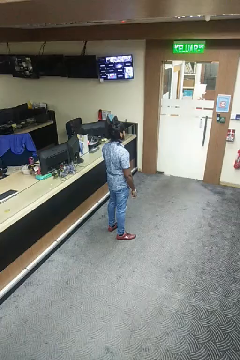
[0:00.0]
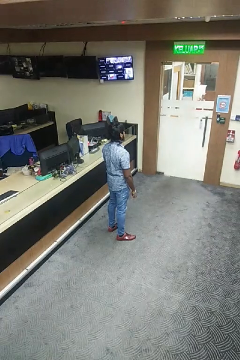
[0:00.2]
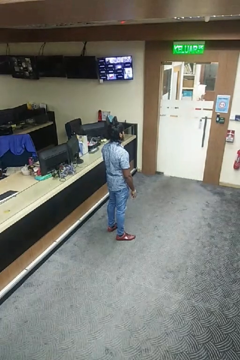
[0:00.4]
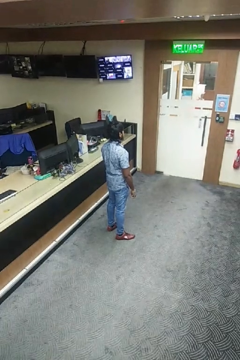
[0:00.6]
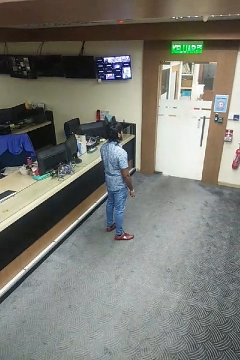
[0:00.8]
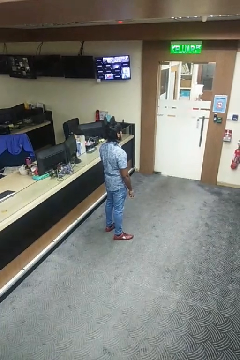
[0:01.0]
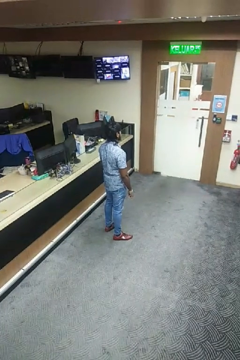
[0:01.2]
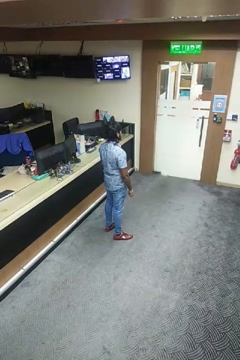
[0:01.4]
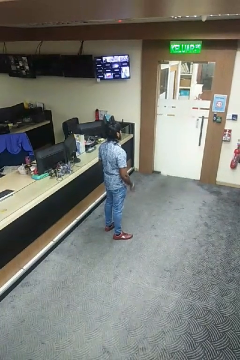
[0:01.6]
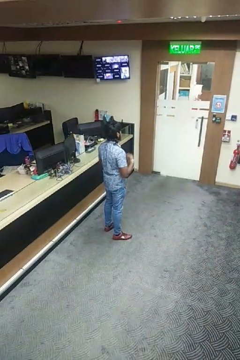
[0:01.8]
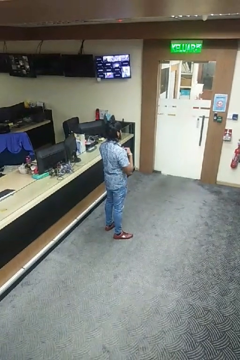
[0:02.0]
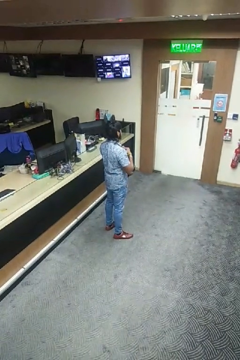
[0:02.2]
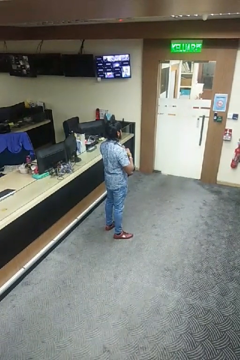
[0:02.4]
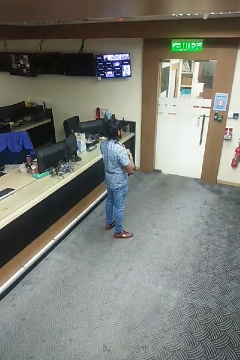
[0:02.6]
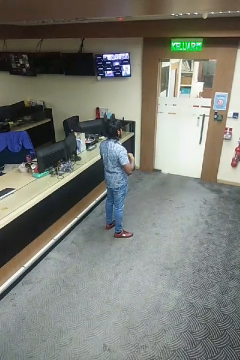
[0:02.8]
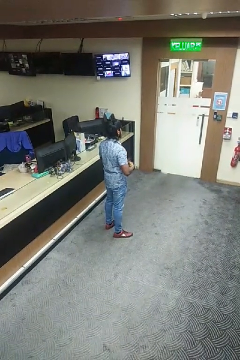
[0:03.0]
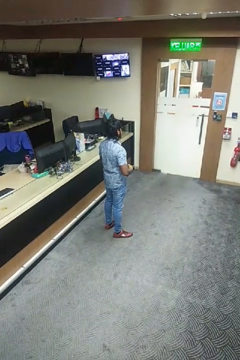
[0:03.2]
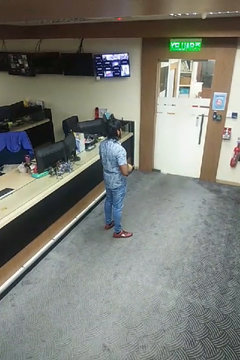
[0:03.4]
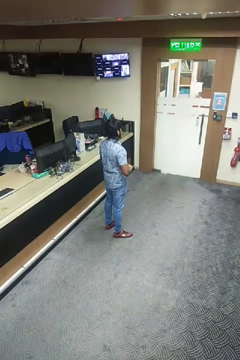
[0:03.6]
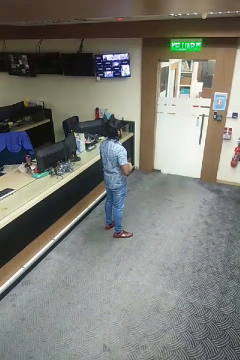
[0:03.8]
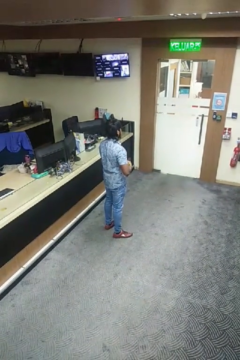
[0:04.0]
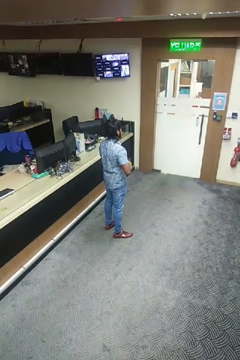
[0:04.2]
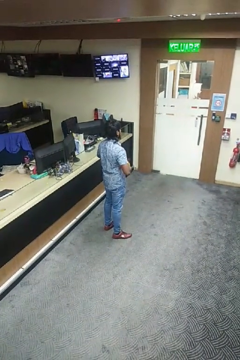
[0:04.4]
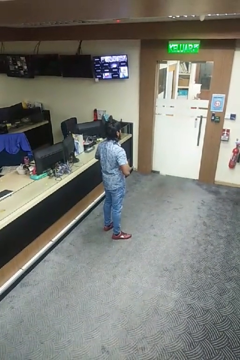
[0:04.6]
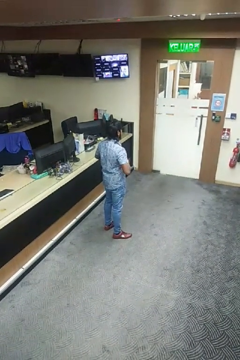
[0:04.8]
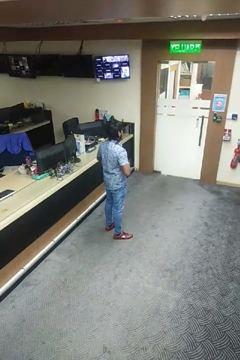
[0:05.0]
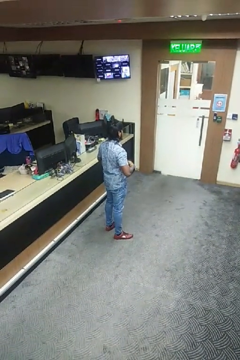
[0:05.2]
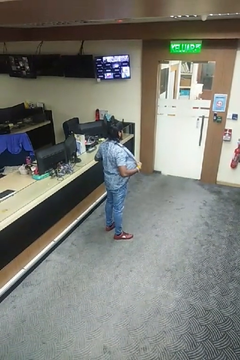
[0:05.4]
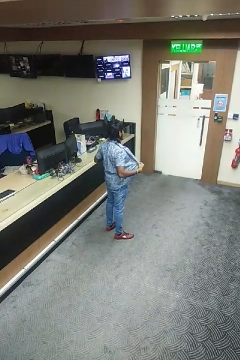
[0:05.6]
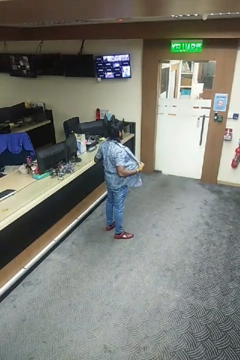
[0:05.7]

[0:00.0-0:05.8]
person unbuttons shirt

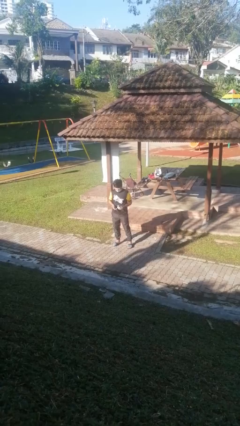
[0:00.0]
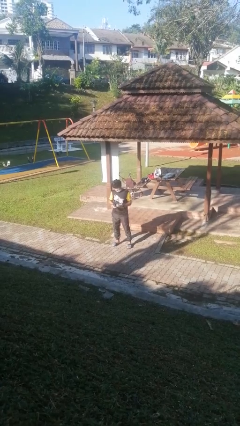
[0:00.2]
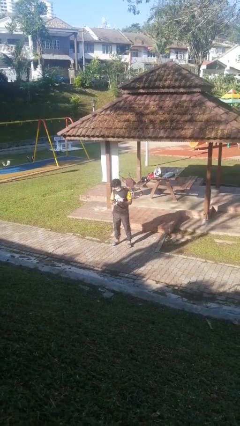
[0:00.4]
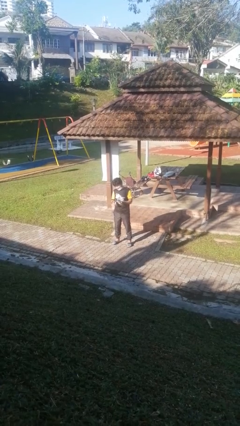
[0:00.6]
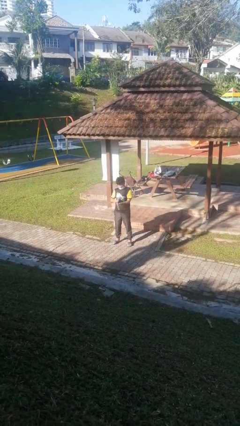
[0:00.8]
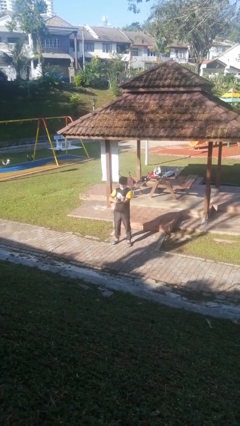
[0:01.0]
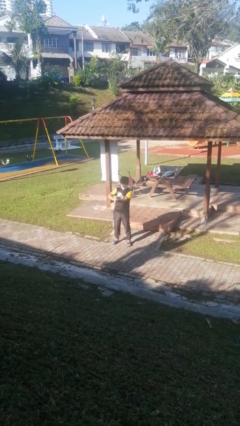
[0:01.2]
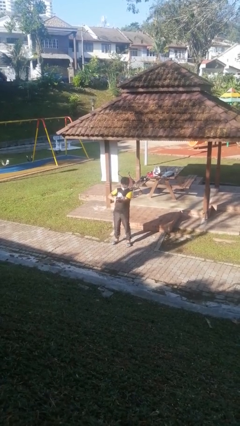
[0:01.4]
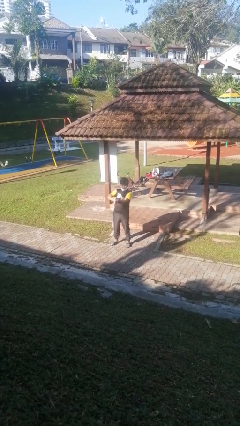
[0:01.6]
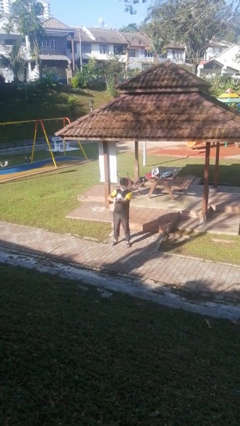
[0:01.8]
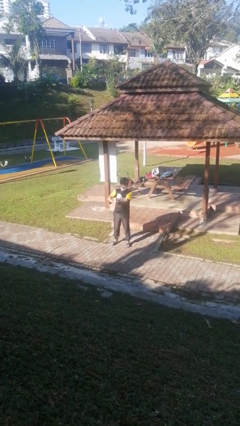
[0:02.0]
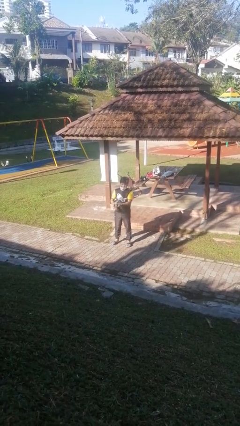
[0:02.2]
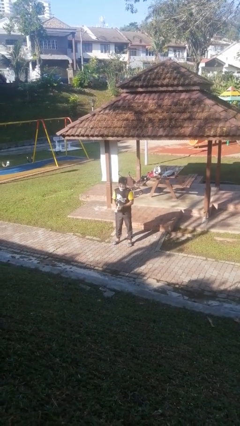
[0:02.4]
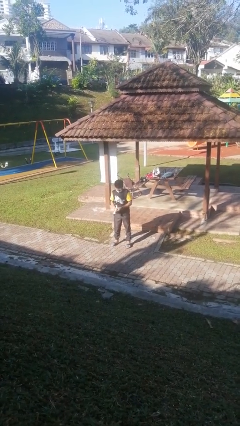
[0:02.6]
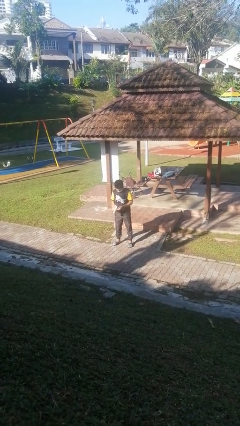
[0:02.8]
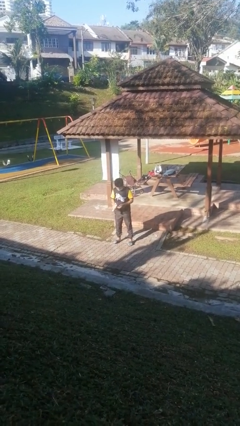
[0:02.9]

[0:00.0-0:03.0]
person applies sunscreen

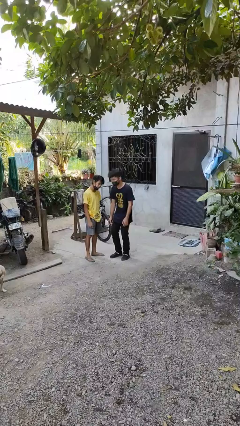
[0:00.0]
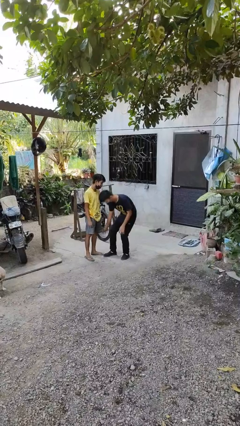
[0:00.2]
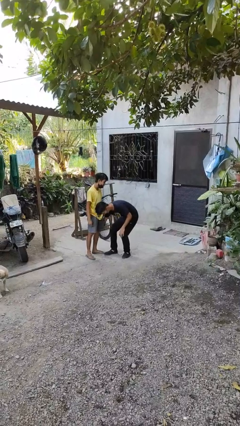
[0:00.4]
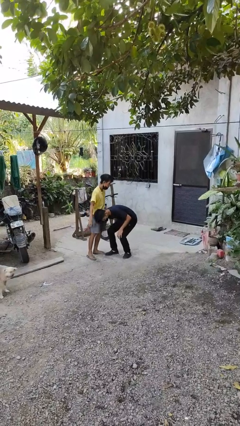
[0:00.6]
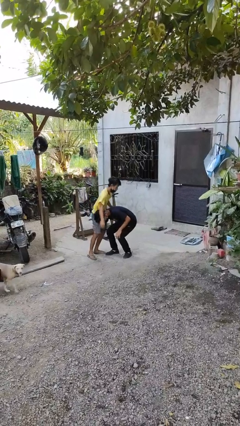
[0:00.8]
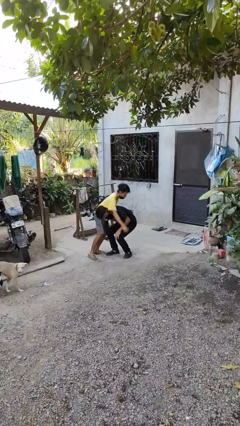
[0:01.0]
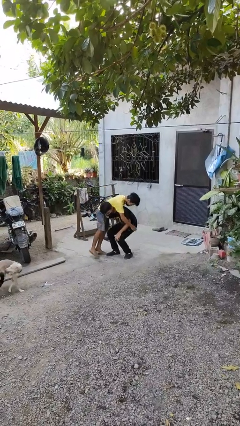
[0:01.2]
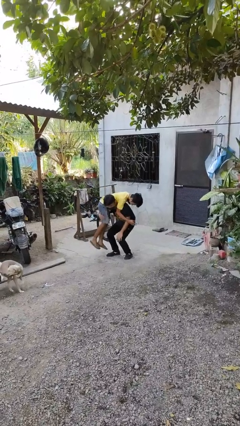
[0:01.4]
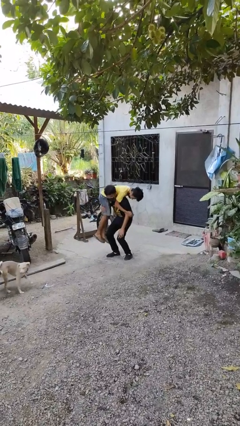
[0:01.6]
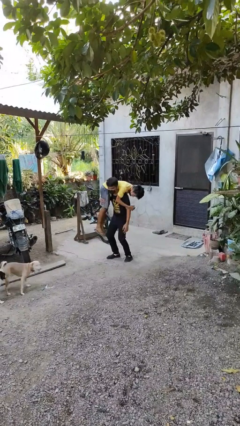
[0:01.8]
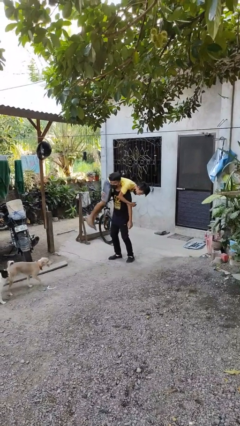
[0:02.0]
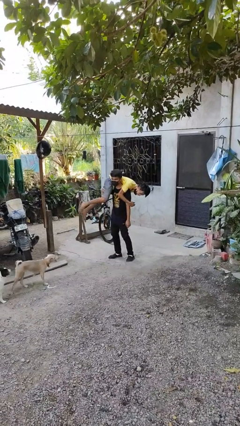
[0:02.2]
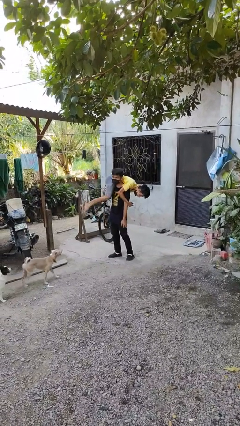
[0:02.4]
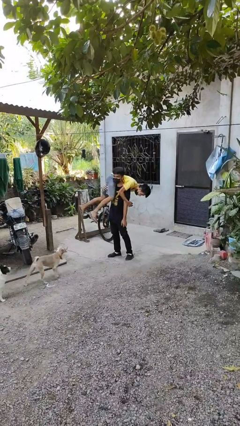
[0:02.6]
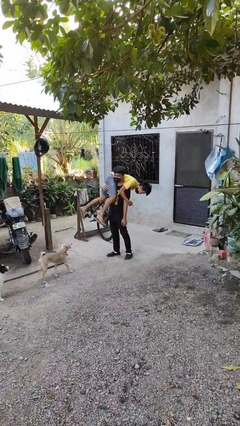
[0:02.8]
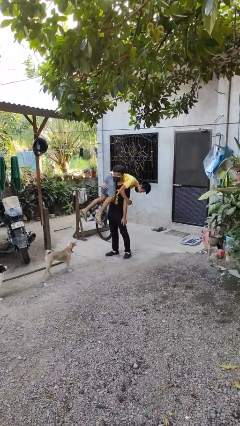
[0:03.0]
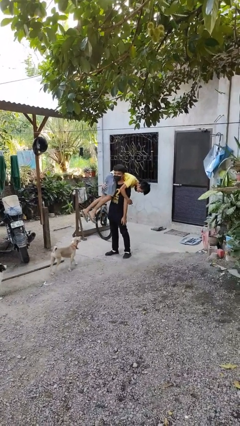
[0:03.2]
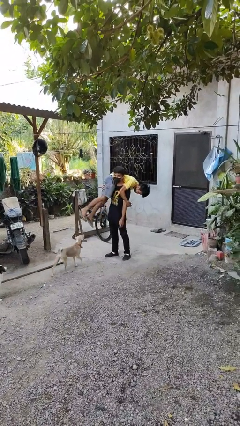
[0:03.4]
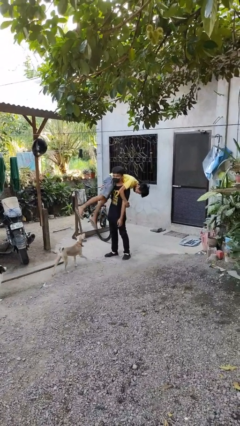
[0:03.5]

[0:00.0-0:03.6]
person carries person over shoulder

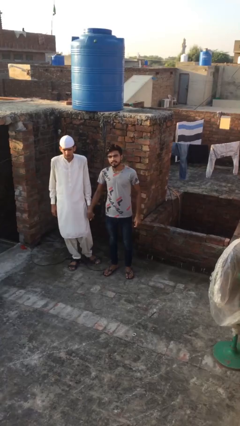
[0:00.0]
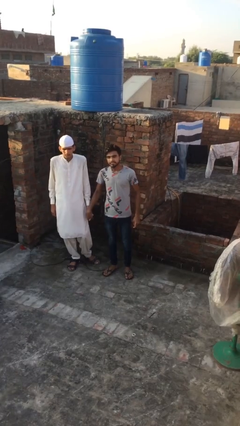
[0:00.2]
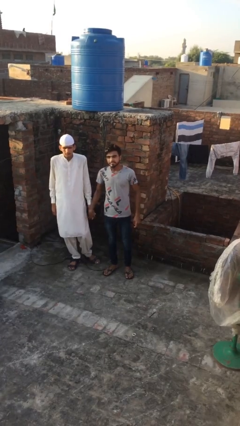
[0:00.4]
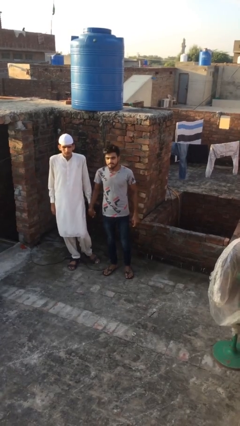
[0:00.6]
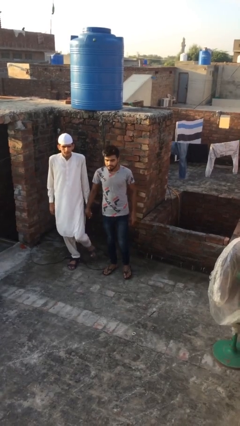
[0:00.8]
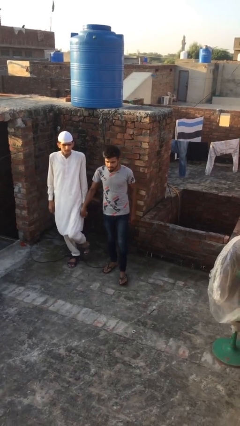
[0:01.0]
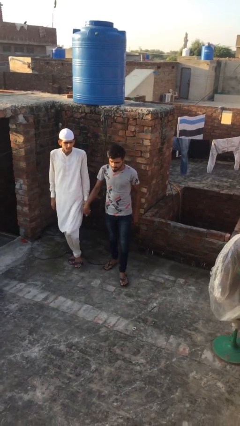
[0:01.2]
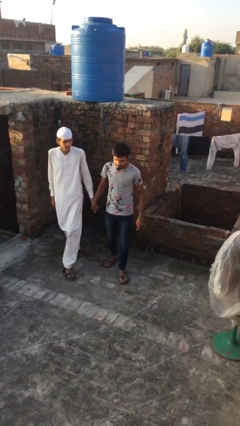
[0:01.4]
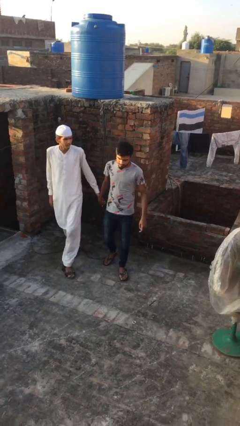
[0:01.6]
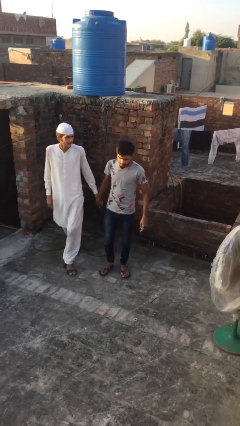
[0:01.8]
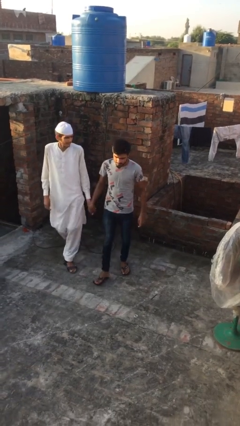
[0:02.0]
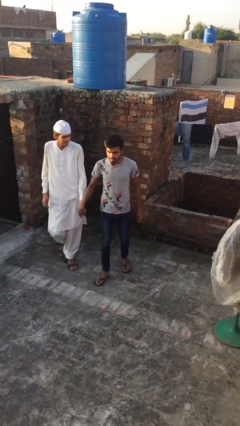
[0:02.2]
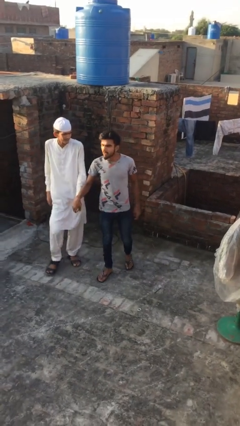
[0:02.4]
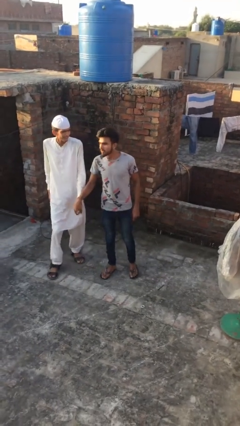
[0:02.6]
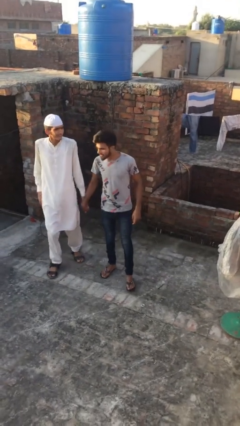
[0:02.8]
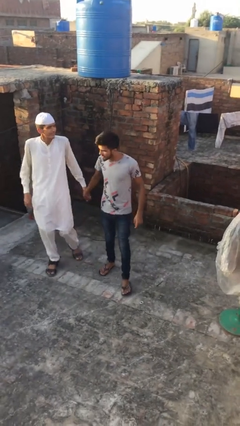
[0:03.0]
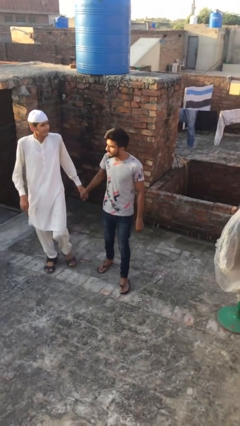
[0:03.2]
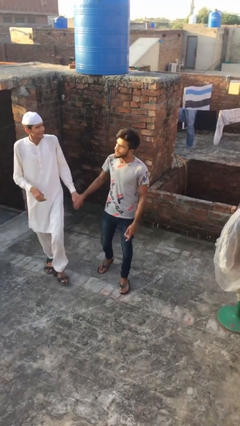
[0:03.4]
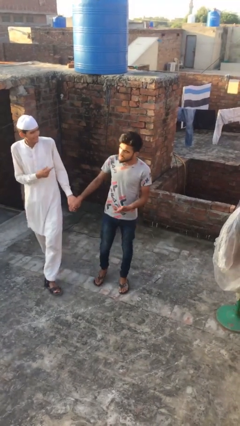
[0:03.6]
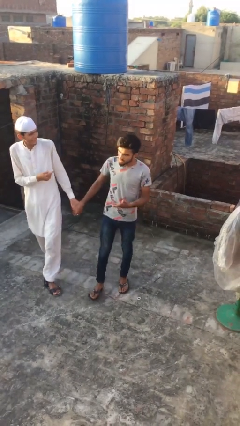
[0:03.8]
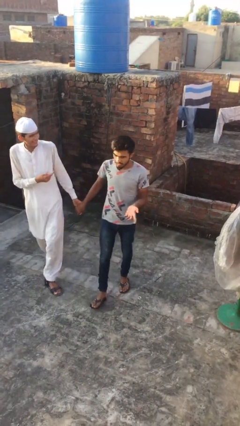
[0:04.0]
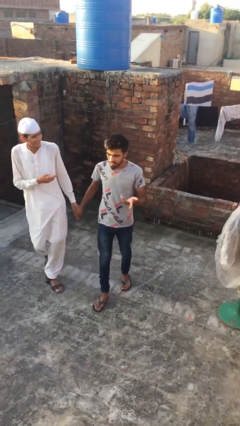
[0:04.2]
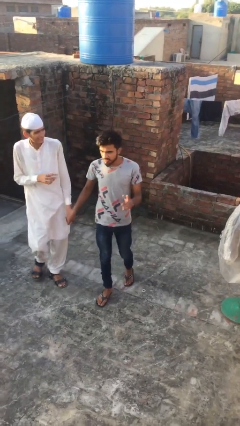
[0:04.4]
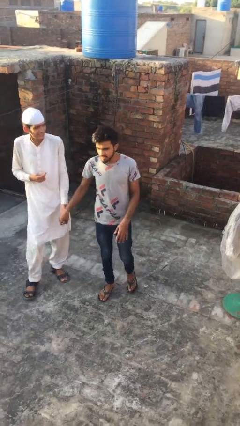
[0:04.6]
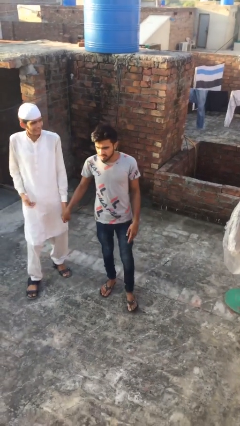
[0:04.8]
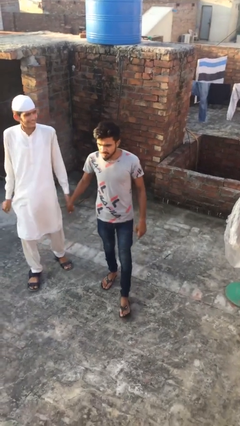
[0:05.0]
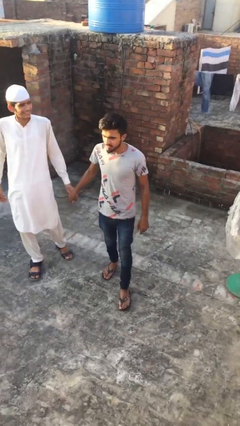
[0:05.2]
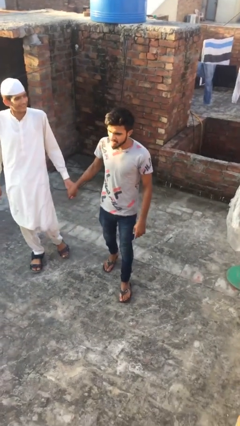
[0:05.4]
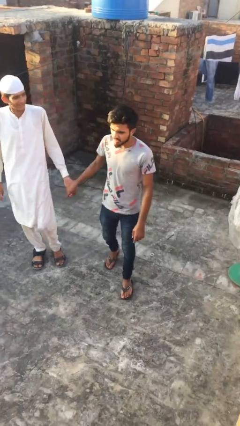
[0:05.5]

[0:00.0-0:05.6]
person holds hand

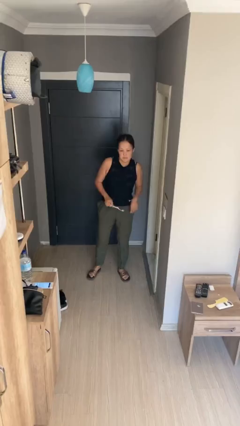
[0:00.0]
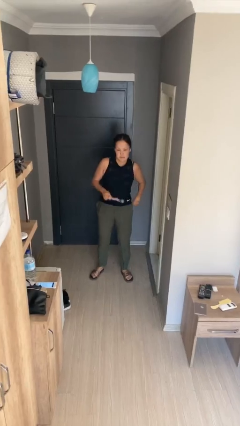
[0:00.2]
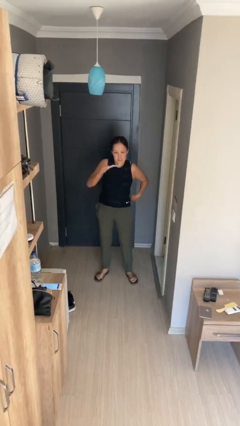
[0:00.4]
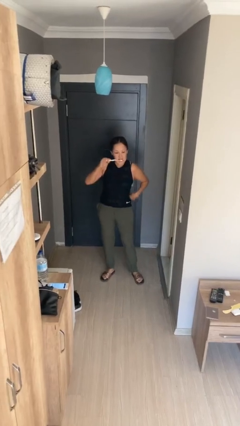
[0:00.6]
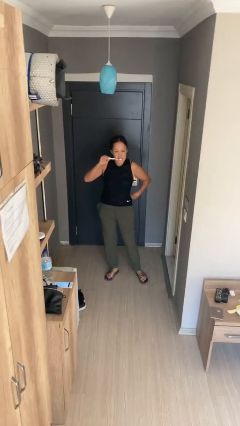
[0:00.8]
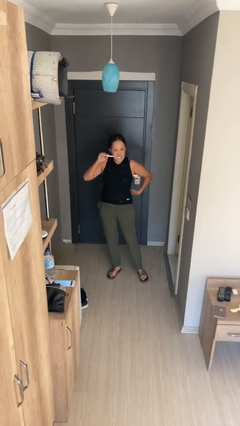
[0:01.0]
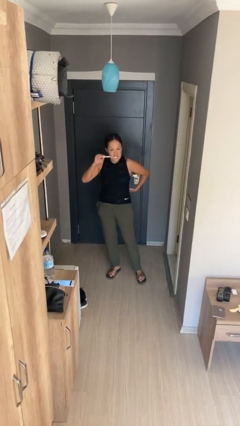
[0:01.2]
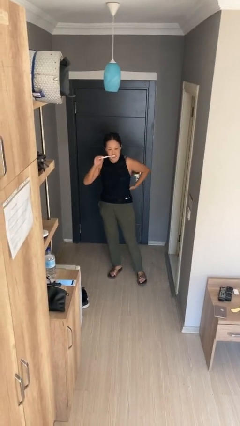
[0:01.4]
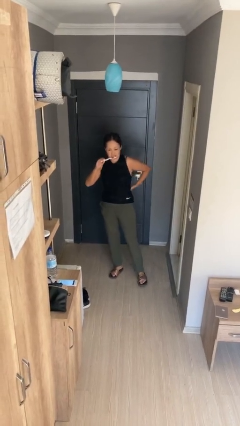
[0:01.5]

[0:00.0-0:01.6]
person brushes teeth
